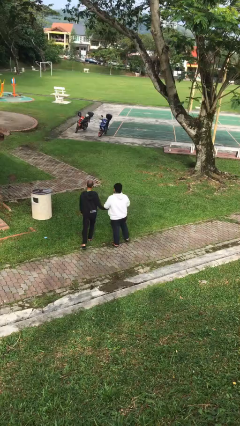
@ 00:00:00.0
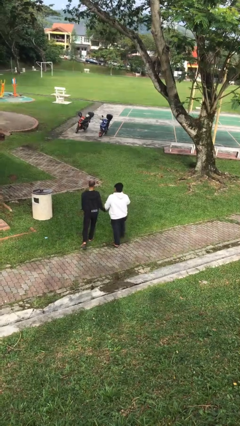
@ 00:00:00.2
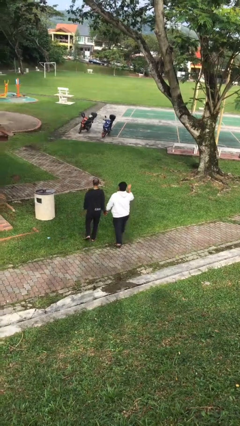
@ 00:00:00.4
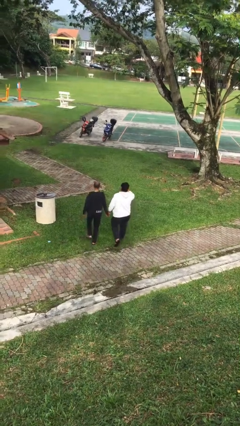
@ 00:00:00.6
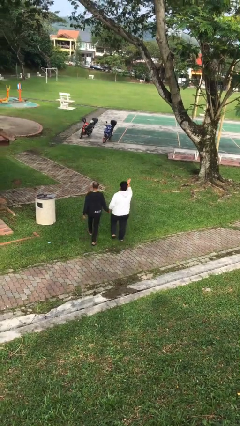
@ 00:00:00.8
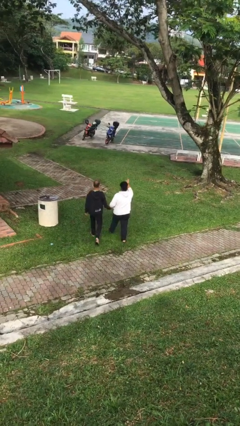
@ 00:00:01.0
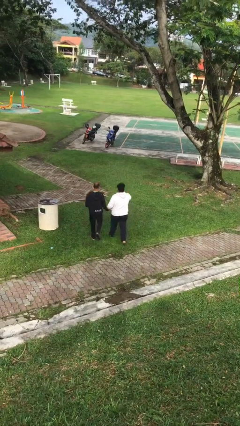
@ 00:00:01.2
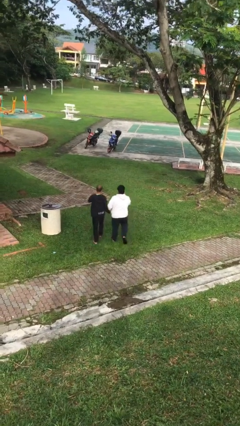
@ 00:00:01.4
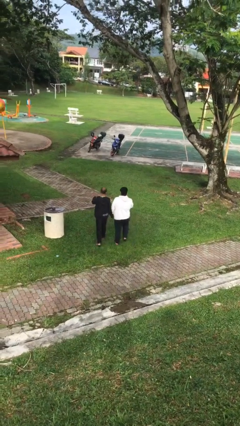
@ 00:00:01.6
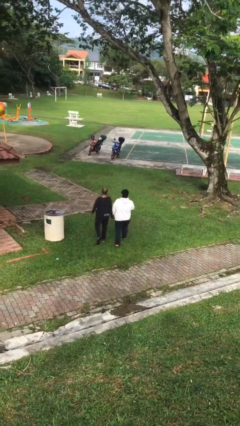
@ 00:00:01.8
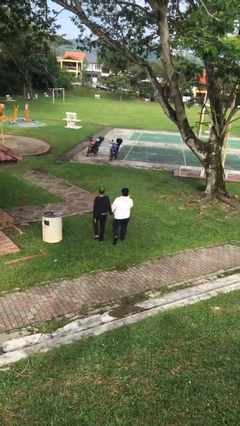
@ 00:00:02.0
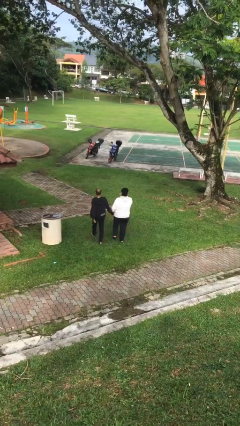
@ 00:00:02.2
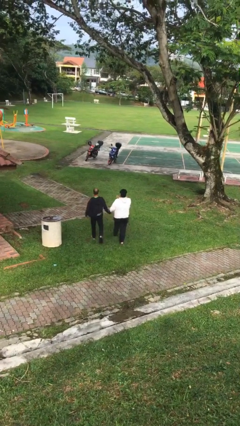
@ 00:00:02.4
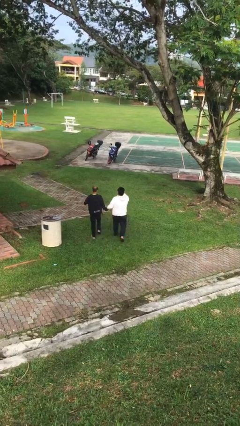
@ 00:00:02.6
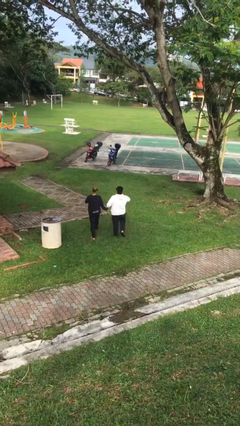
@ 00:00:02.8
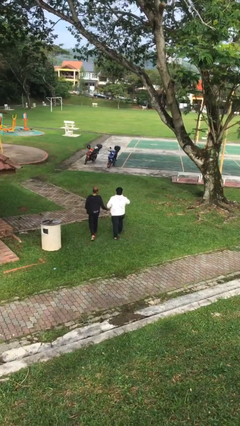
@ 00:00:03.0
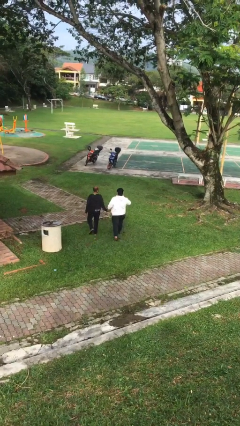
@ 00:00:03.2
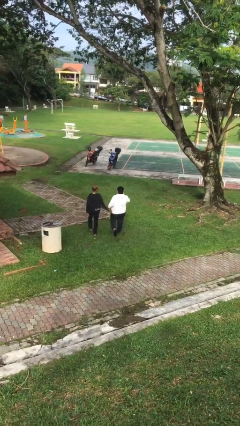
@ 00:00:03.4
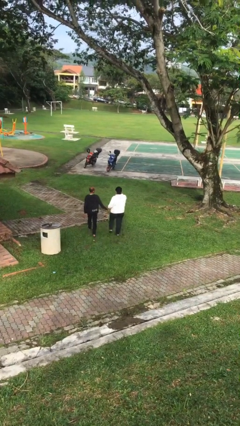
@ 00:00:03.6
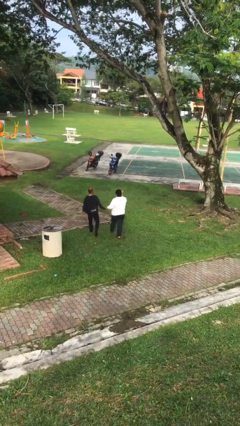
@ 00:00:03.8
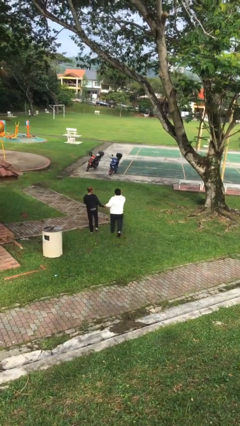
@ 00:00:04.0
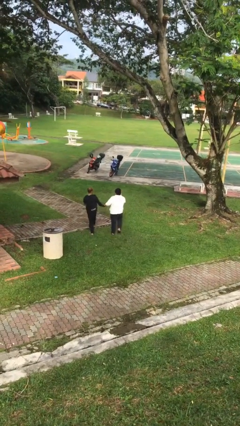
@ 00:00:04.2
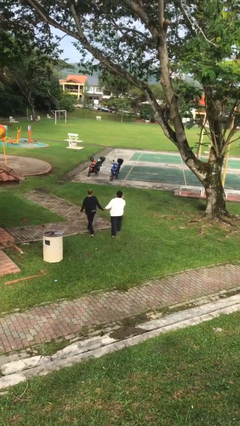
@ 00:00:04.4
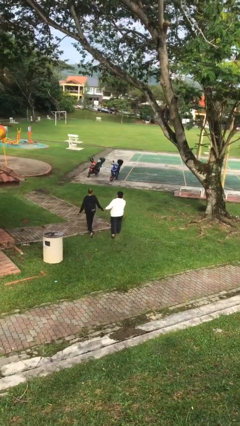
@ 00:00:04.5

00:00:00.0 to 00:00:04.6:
person holds hand

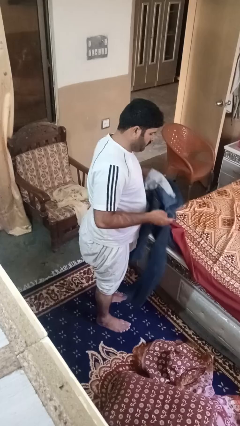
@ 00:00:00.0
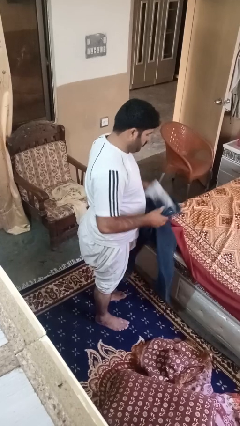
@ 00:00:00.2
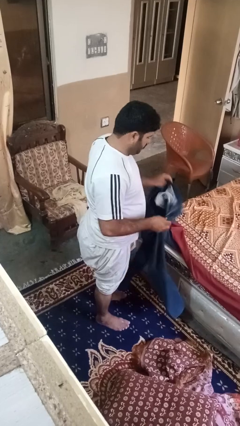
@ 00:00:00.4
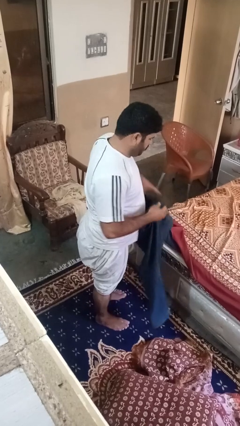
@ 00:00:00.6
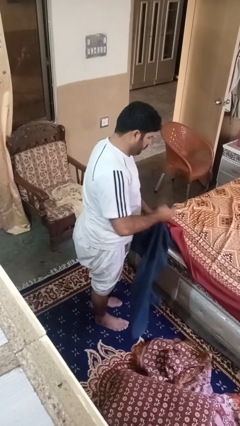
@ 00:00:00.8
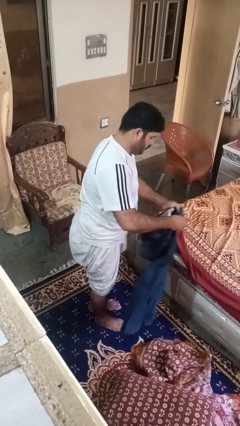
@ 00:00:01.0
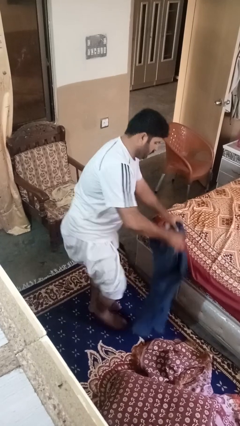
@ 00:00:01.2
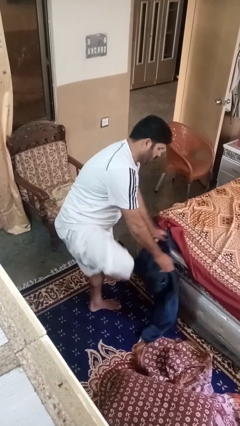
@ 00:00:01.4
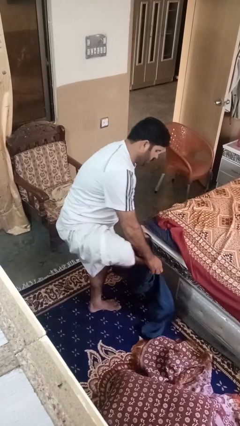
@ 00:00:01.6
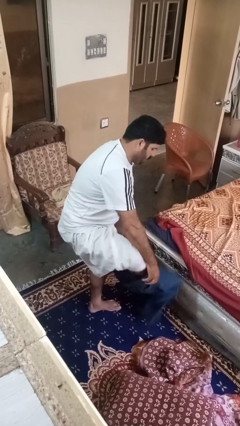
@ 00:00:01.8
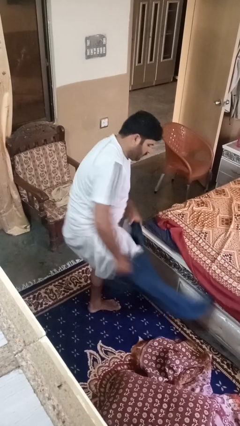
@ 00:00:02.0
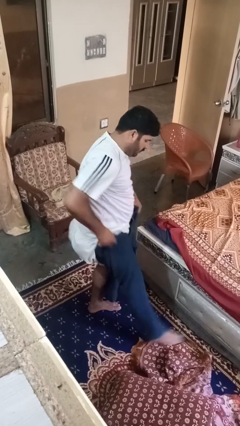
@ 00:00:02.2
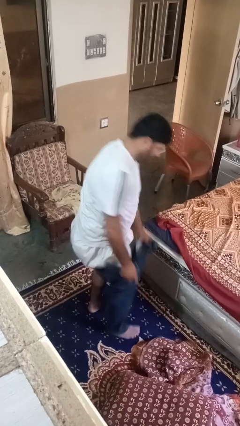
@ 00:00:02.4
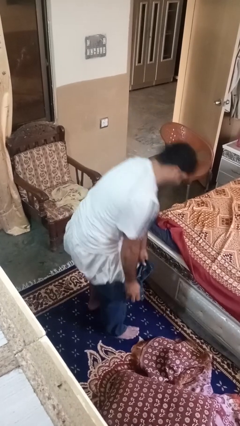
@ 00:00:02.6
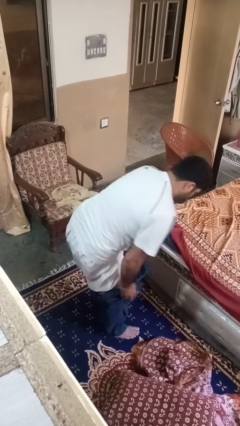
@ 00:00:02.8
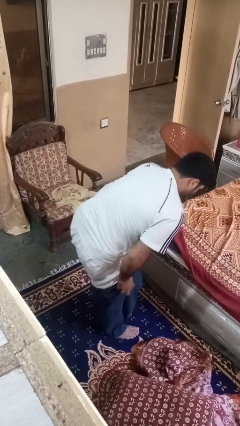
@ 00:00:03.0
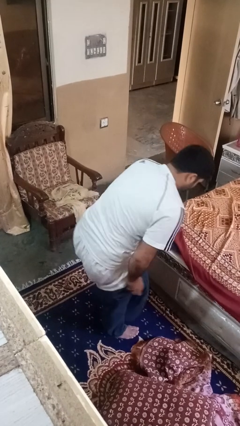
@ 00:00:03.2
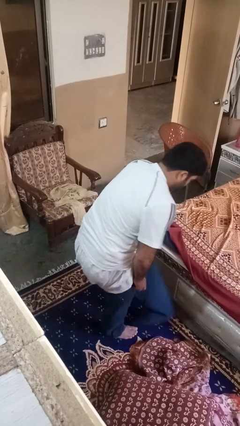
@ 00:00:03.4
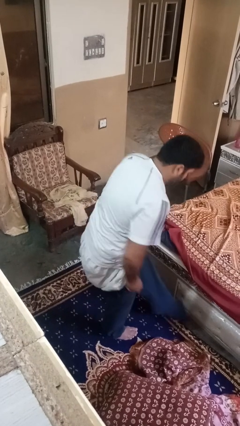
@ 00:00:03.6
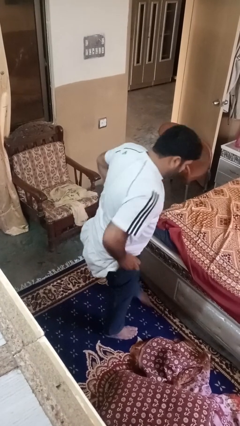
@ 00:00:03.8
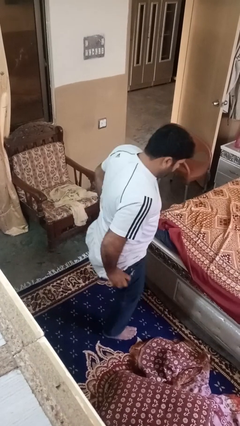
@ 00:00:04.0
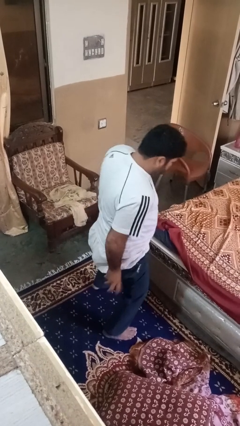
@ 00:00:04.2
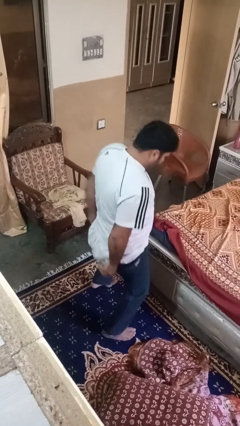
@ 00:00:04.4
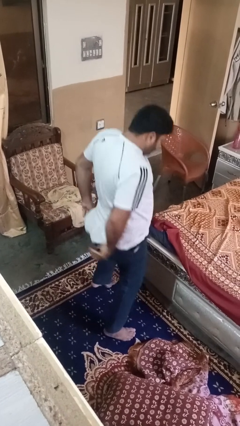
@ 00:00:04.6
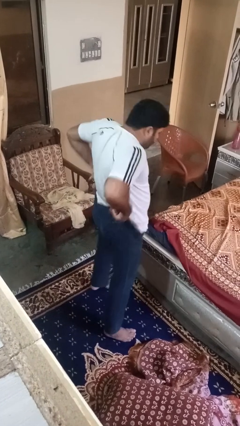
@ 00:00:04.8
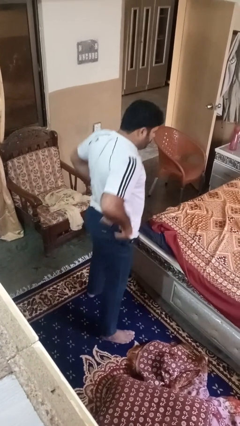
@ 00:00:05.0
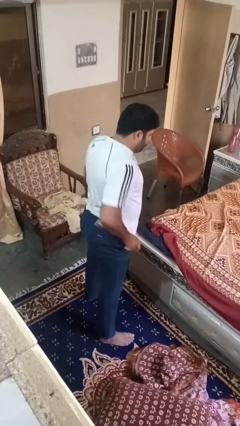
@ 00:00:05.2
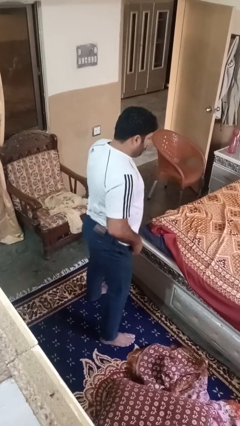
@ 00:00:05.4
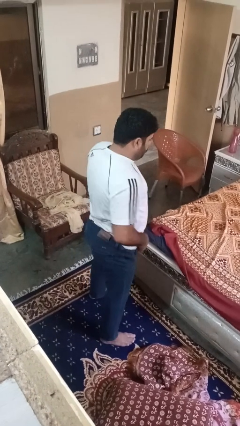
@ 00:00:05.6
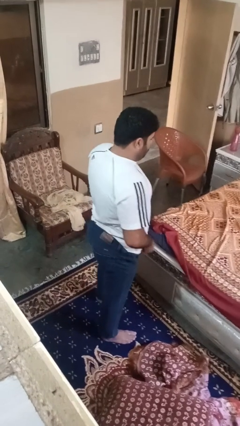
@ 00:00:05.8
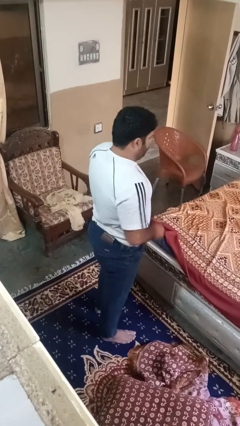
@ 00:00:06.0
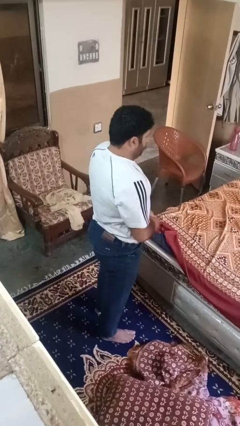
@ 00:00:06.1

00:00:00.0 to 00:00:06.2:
person puts on pants

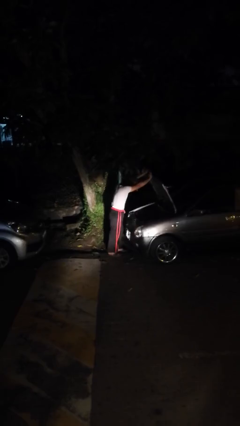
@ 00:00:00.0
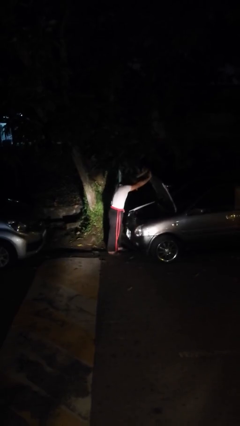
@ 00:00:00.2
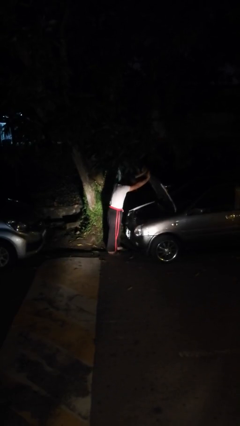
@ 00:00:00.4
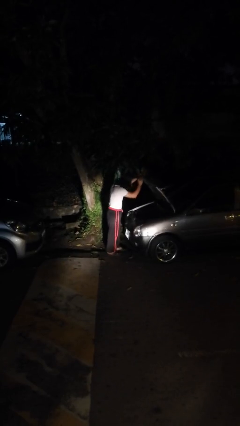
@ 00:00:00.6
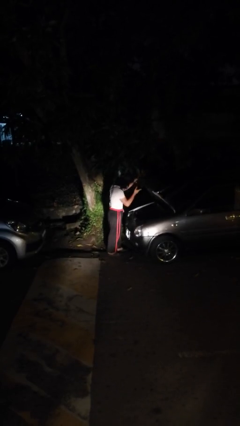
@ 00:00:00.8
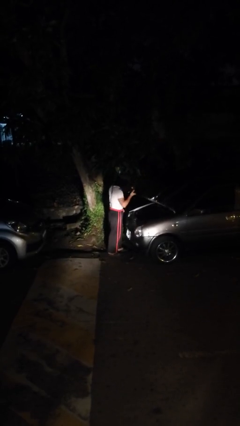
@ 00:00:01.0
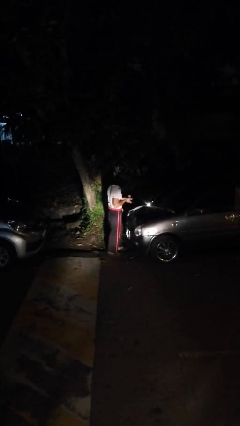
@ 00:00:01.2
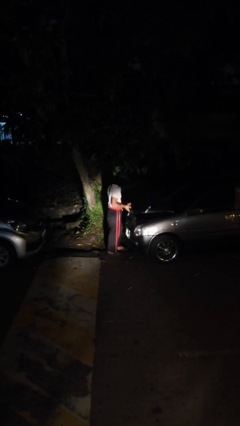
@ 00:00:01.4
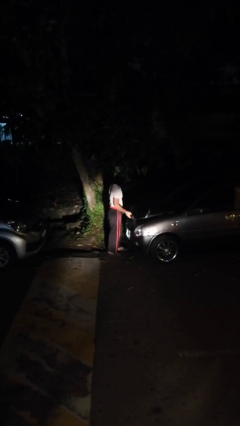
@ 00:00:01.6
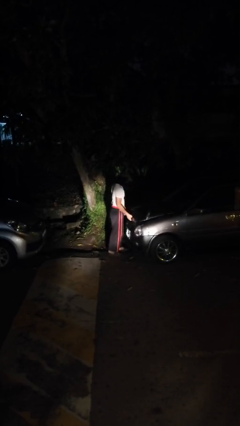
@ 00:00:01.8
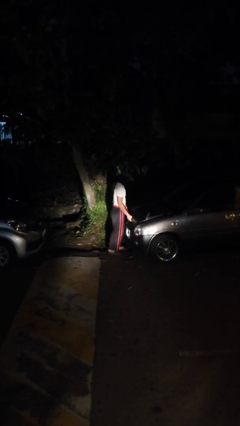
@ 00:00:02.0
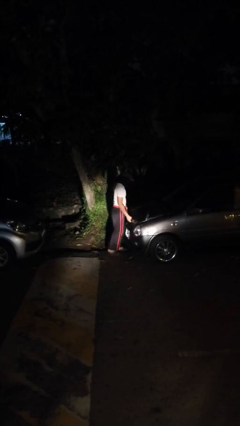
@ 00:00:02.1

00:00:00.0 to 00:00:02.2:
person closes car hood

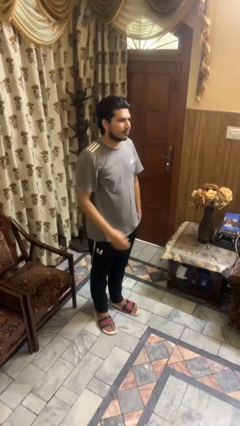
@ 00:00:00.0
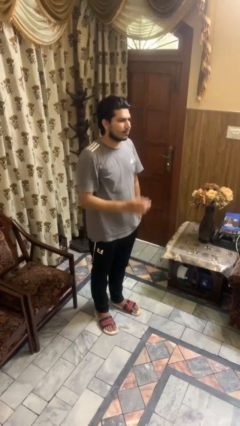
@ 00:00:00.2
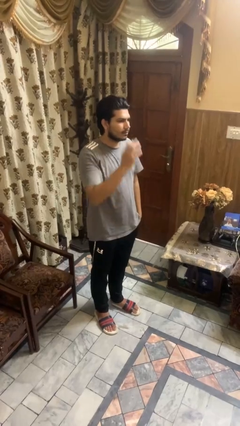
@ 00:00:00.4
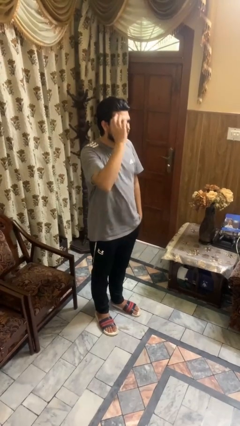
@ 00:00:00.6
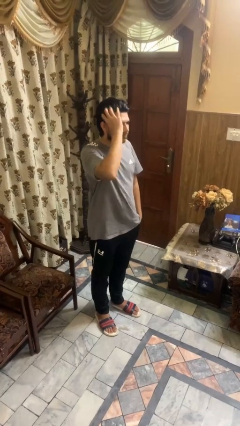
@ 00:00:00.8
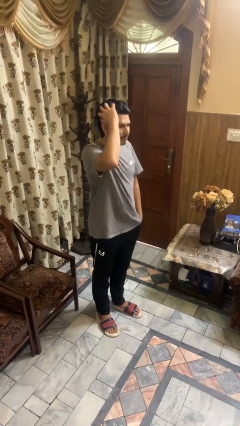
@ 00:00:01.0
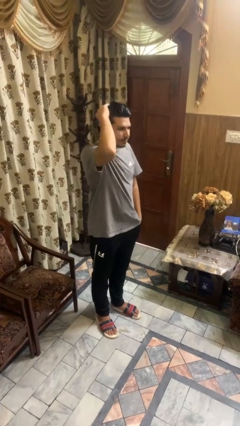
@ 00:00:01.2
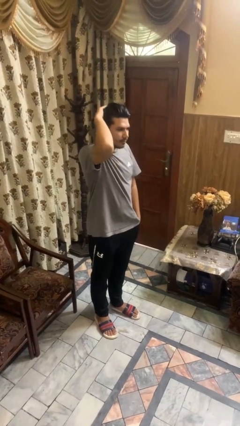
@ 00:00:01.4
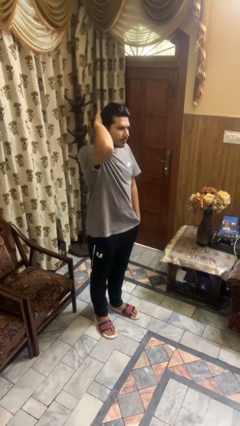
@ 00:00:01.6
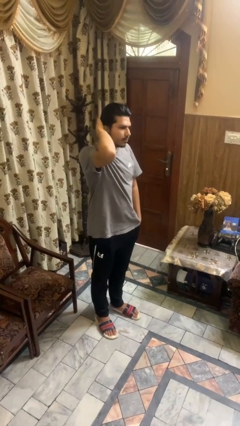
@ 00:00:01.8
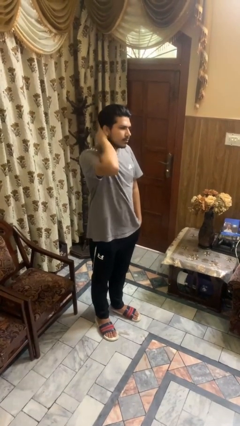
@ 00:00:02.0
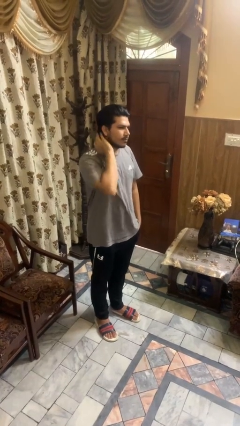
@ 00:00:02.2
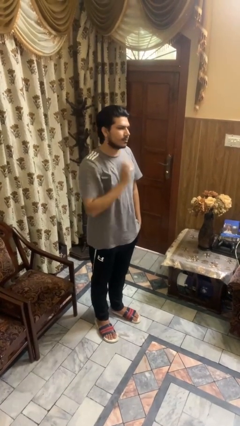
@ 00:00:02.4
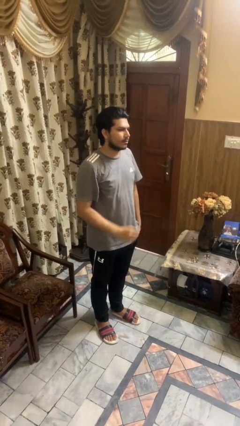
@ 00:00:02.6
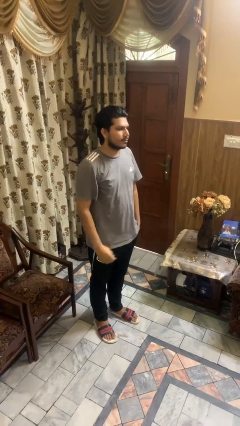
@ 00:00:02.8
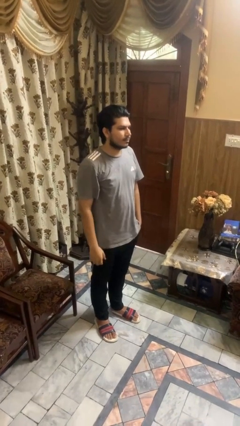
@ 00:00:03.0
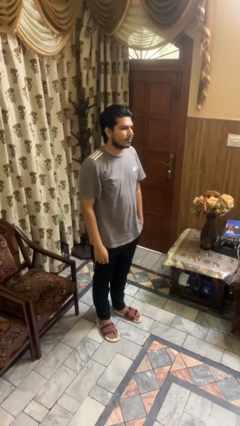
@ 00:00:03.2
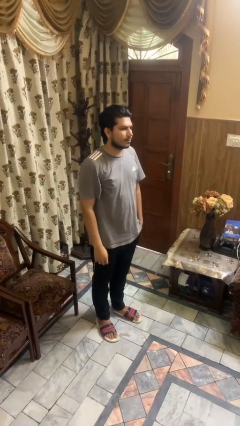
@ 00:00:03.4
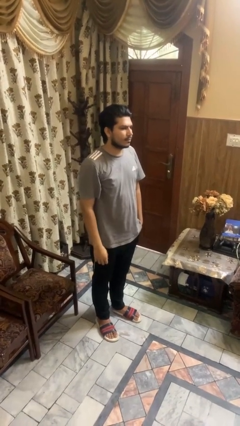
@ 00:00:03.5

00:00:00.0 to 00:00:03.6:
person strokes hair

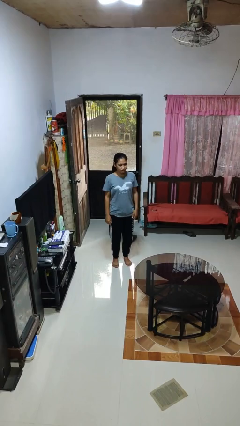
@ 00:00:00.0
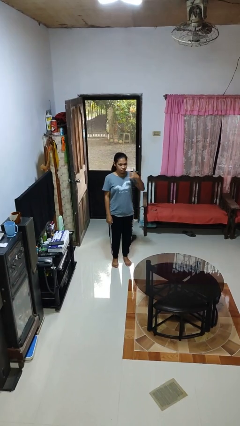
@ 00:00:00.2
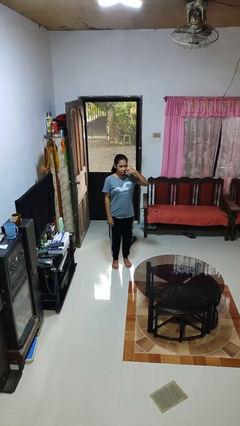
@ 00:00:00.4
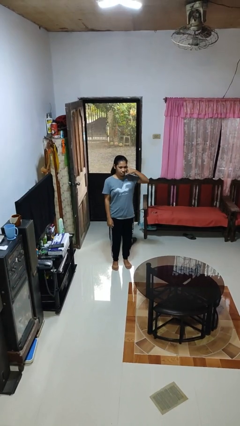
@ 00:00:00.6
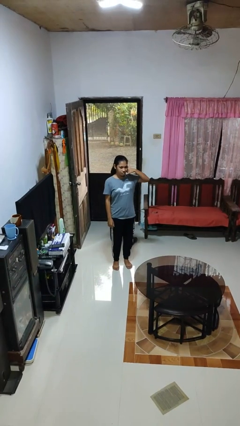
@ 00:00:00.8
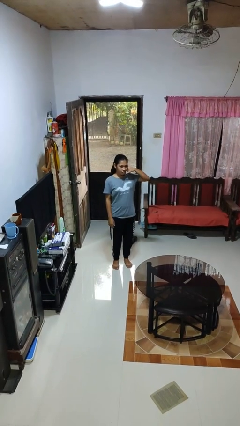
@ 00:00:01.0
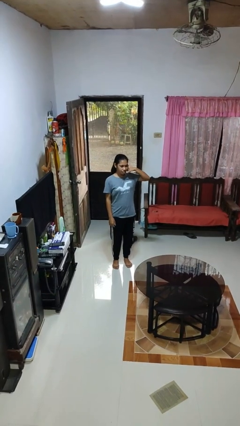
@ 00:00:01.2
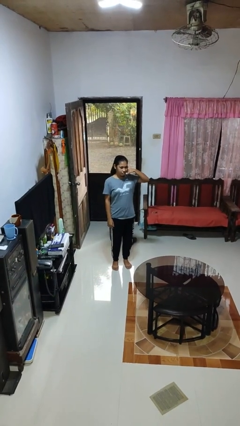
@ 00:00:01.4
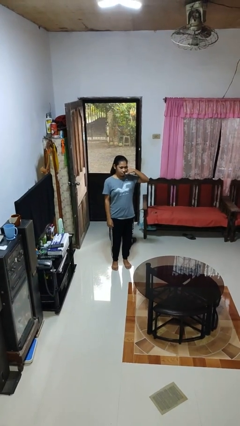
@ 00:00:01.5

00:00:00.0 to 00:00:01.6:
person gestures call me
